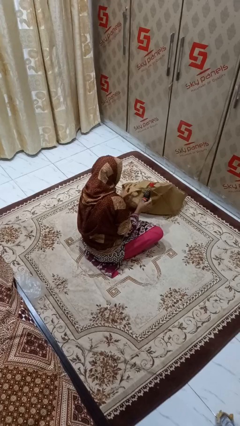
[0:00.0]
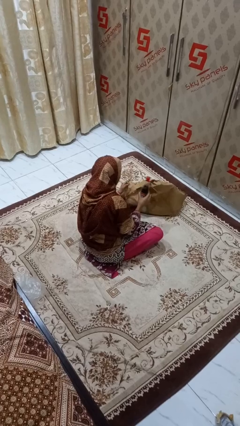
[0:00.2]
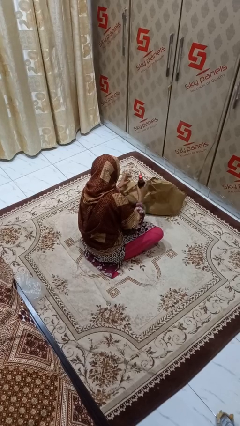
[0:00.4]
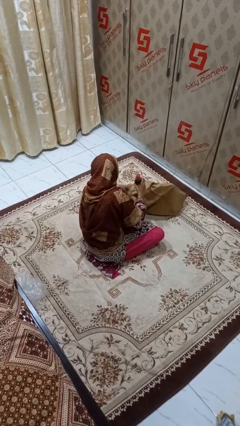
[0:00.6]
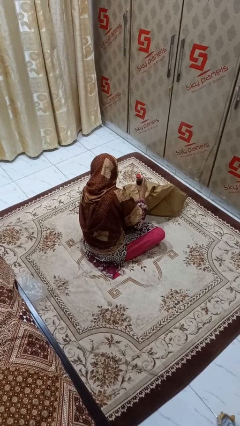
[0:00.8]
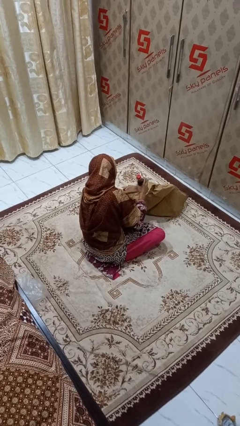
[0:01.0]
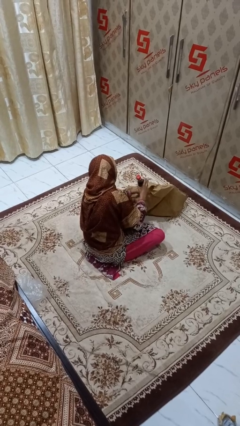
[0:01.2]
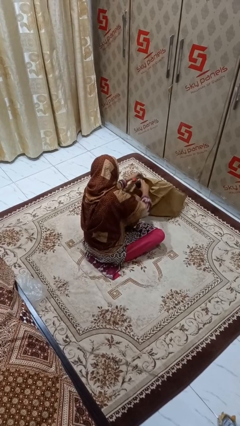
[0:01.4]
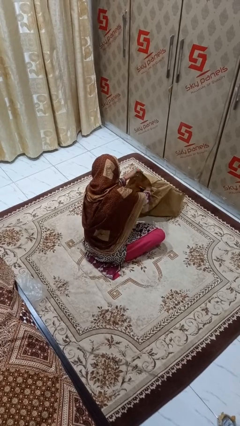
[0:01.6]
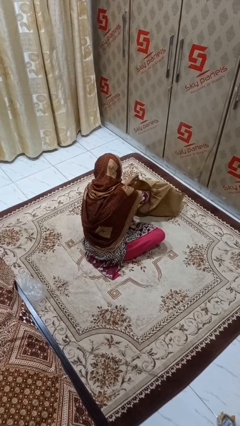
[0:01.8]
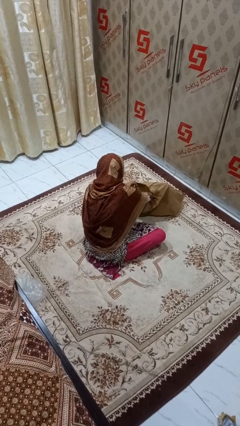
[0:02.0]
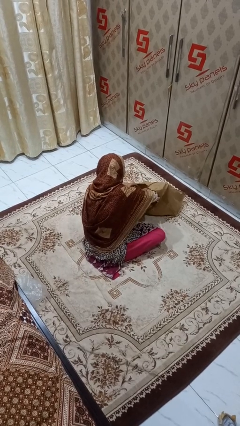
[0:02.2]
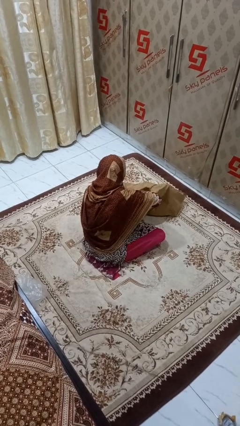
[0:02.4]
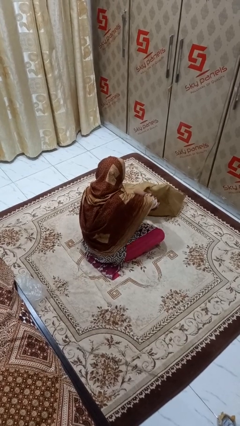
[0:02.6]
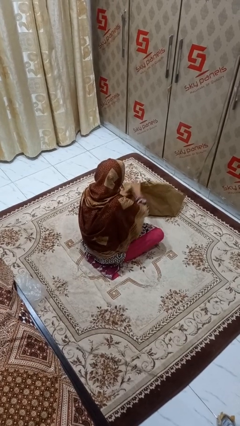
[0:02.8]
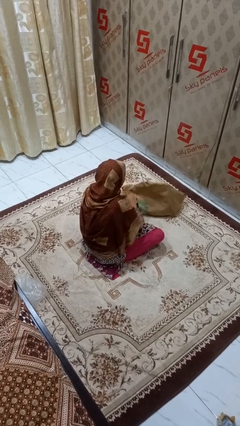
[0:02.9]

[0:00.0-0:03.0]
person puts object into bag

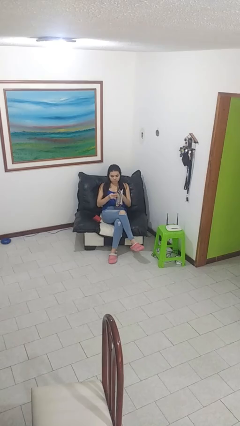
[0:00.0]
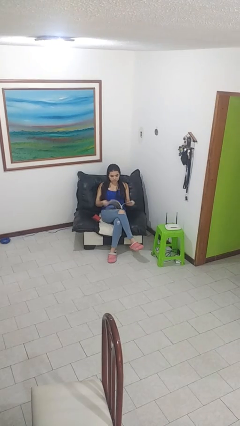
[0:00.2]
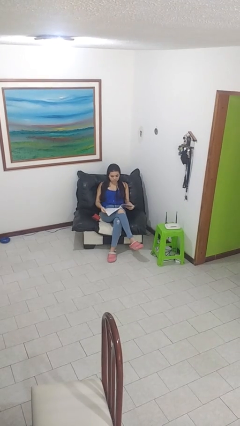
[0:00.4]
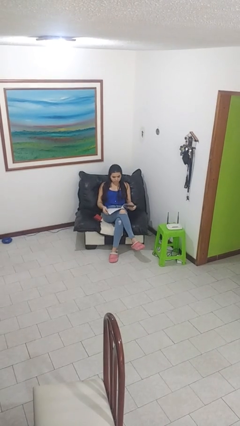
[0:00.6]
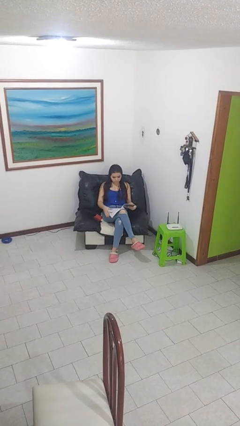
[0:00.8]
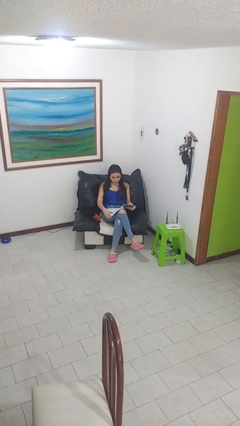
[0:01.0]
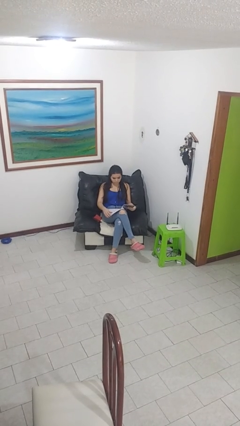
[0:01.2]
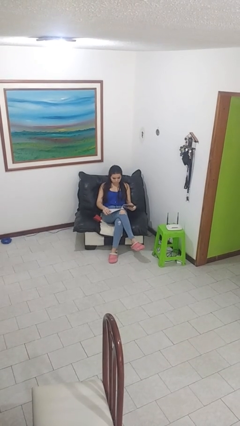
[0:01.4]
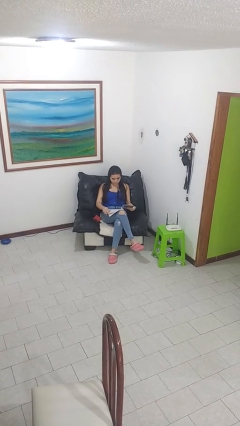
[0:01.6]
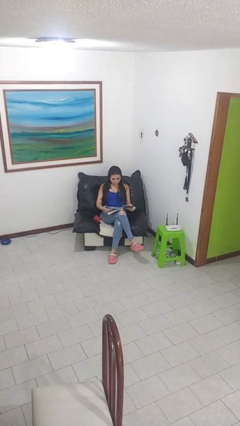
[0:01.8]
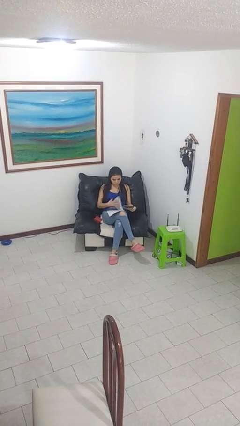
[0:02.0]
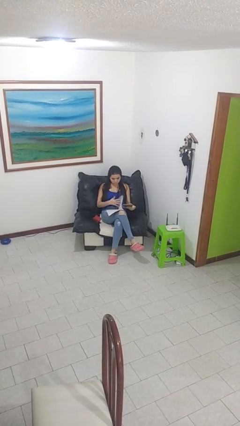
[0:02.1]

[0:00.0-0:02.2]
person reads magazine

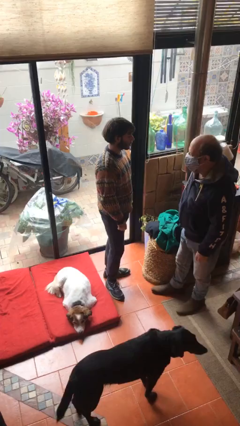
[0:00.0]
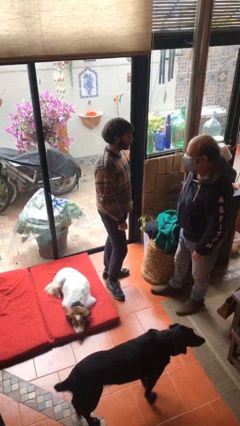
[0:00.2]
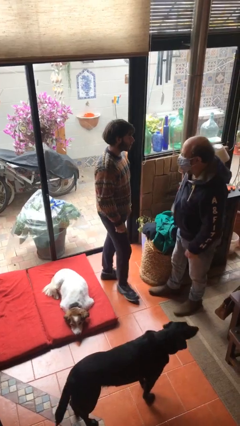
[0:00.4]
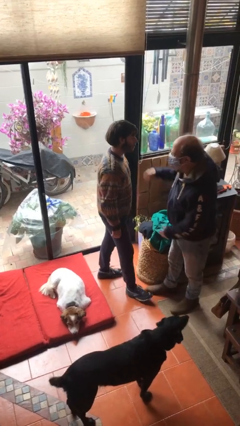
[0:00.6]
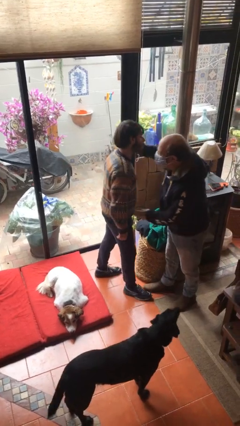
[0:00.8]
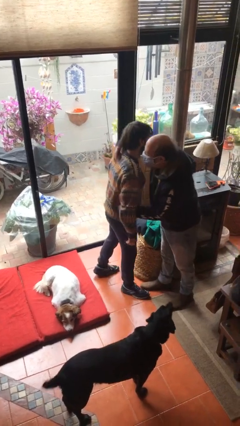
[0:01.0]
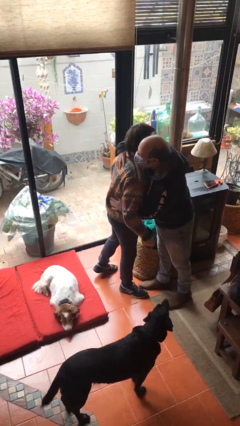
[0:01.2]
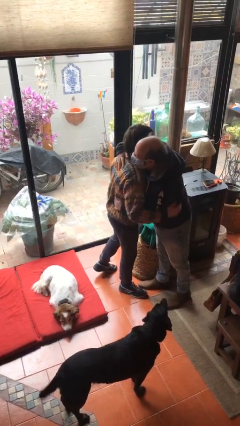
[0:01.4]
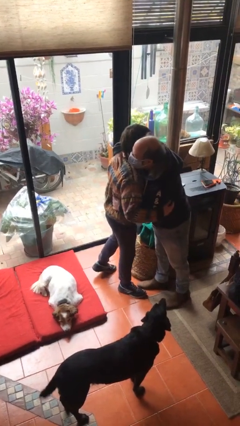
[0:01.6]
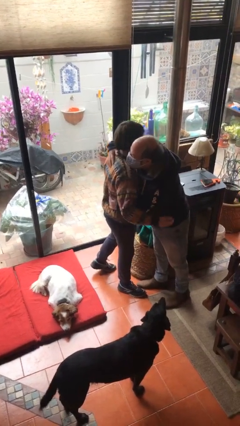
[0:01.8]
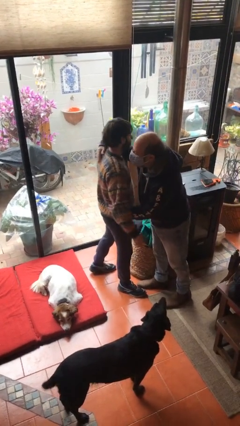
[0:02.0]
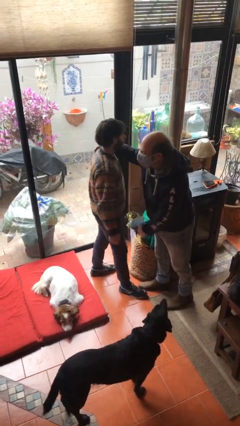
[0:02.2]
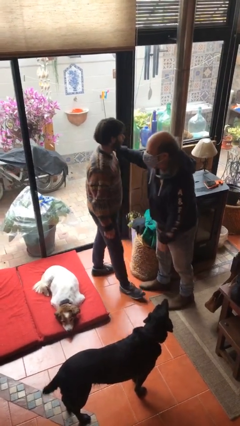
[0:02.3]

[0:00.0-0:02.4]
person kisses cheek of person

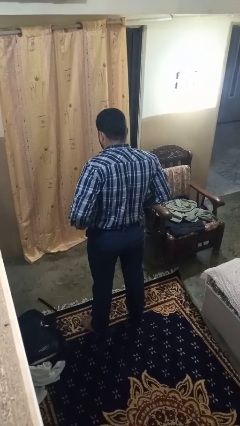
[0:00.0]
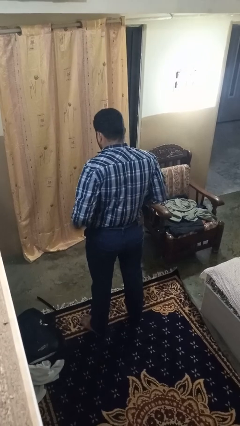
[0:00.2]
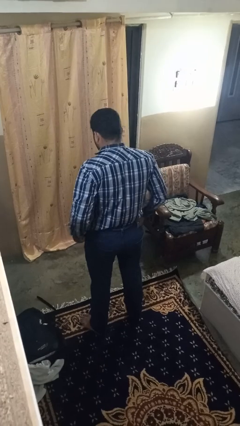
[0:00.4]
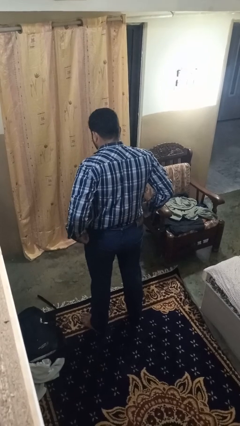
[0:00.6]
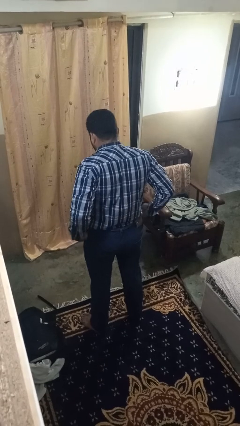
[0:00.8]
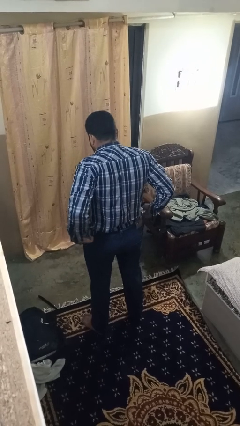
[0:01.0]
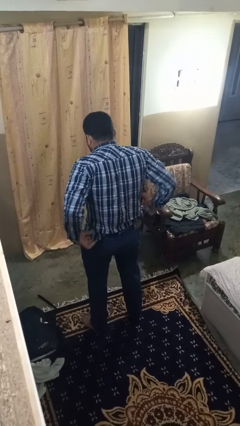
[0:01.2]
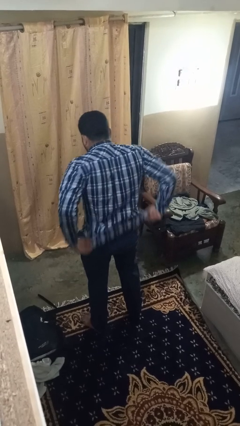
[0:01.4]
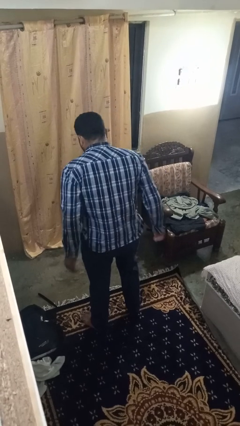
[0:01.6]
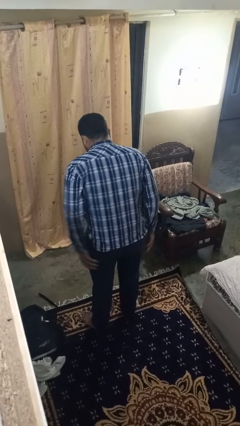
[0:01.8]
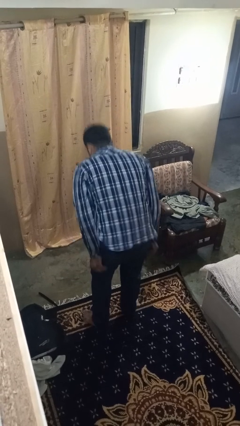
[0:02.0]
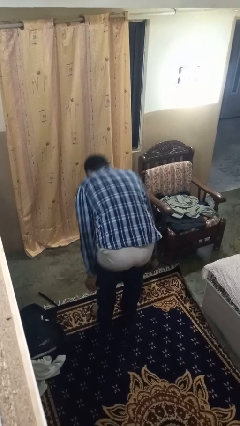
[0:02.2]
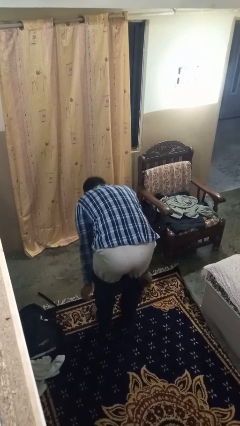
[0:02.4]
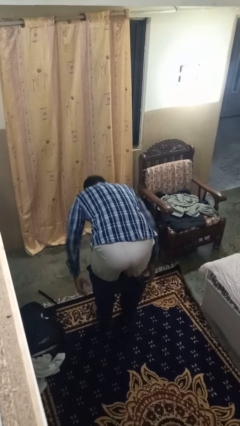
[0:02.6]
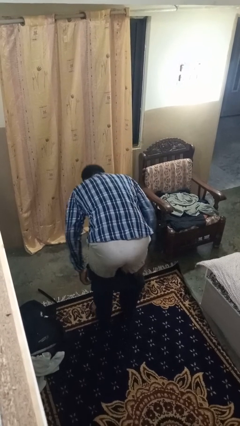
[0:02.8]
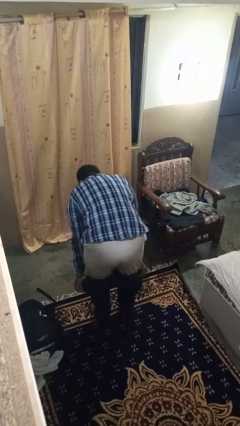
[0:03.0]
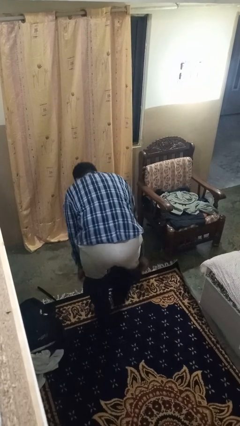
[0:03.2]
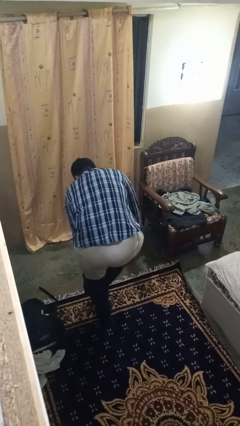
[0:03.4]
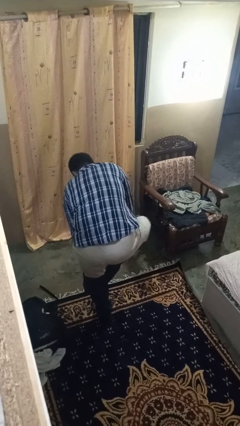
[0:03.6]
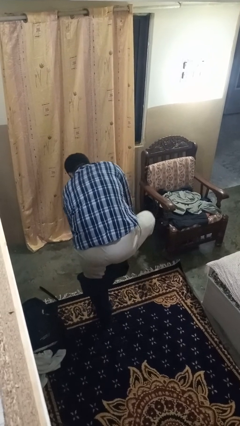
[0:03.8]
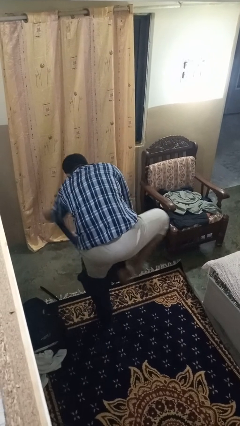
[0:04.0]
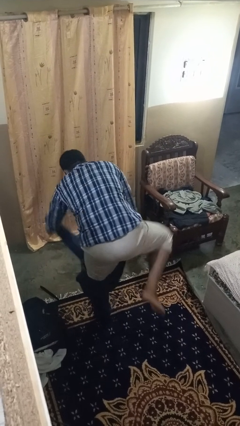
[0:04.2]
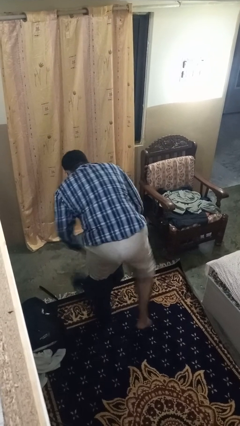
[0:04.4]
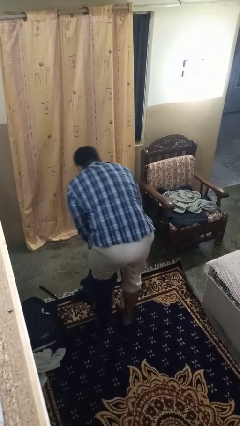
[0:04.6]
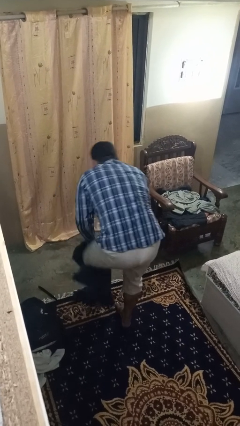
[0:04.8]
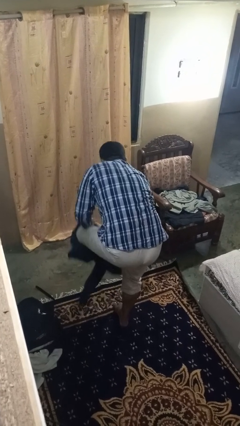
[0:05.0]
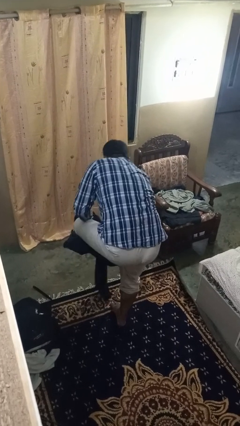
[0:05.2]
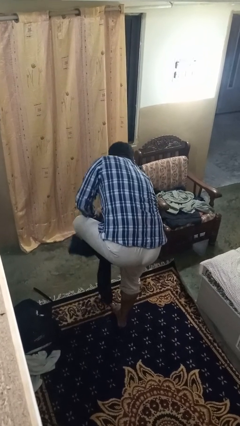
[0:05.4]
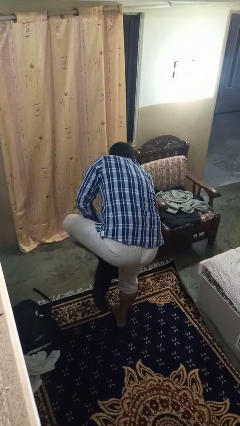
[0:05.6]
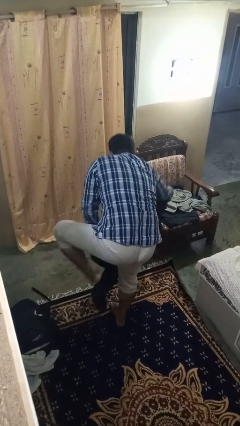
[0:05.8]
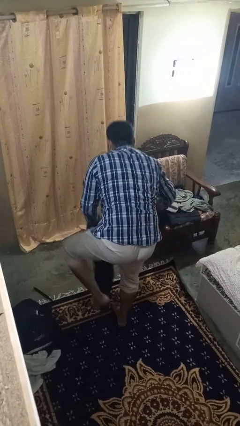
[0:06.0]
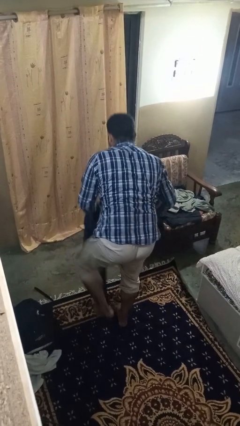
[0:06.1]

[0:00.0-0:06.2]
person takes off pants

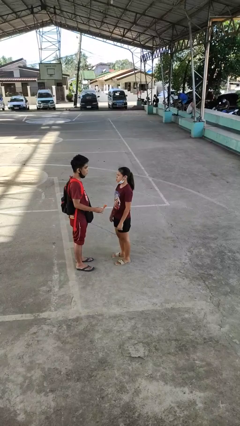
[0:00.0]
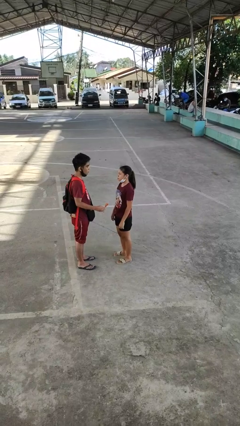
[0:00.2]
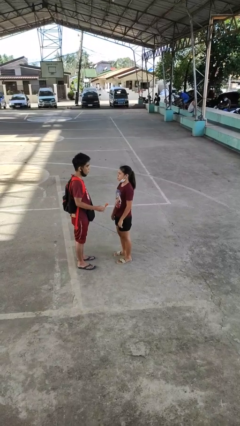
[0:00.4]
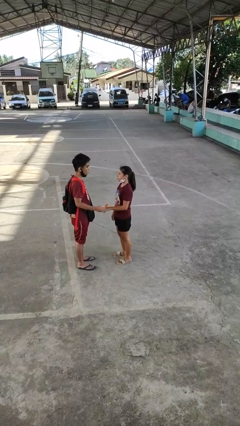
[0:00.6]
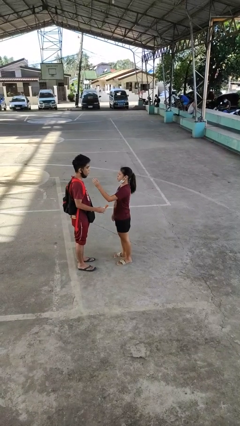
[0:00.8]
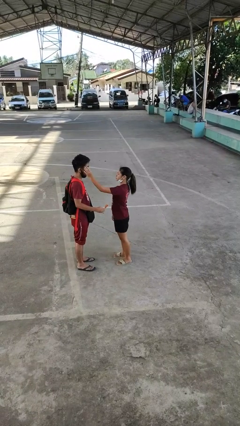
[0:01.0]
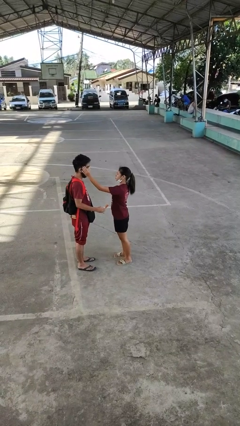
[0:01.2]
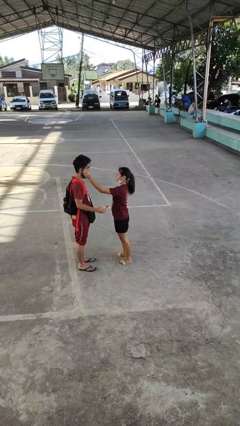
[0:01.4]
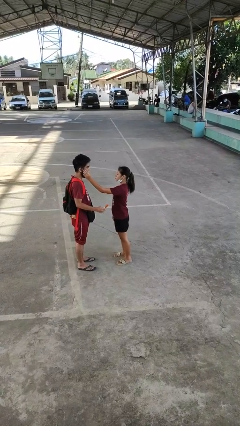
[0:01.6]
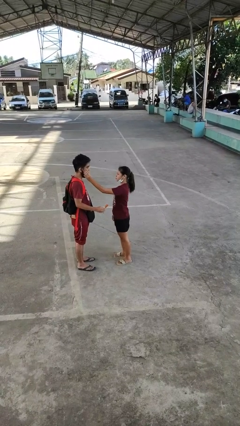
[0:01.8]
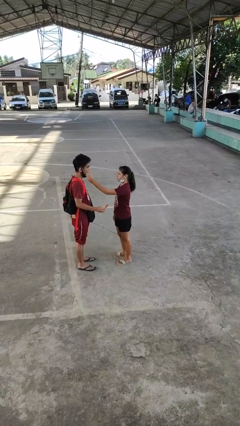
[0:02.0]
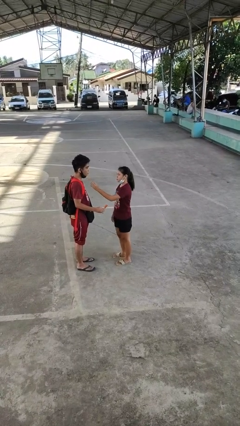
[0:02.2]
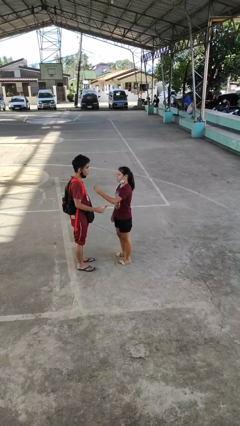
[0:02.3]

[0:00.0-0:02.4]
person touches face of person

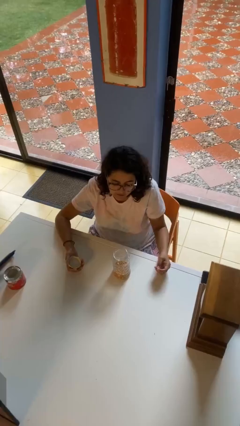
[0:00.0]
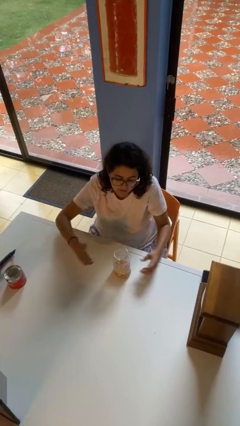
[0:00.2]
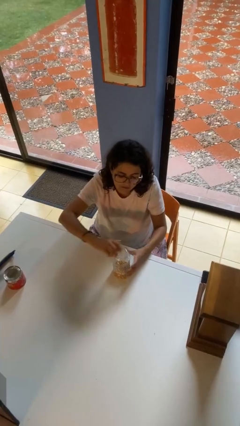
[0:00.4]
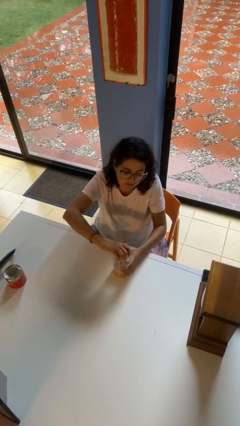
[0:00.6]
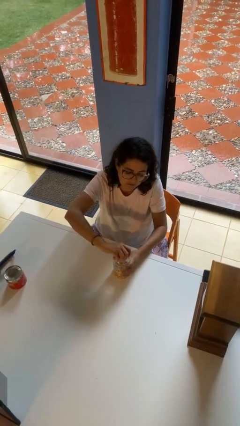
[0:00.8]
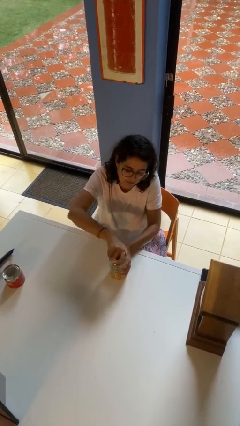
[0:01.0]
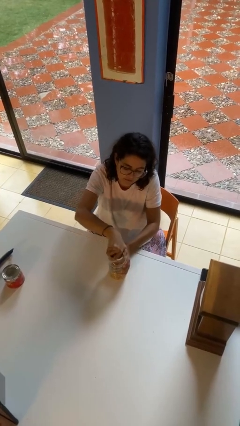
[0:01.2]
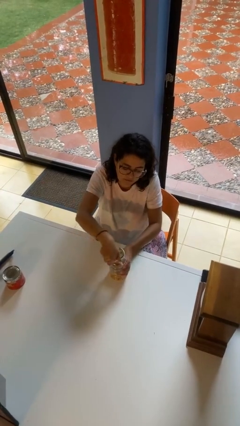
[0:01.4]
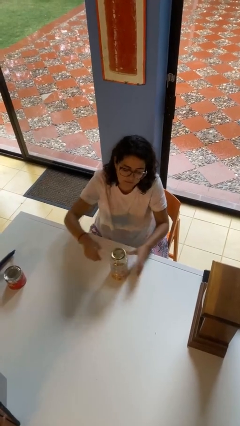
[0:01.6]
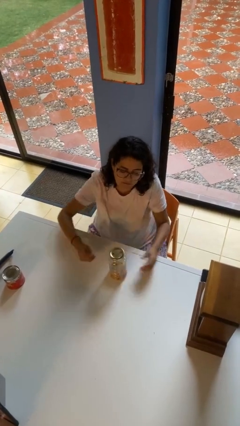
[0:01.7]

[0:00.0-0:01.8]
person closes jar
